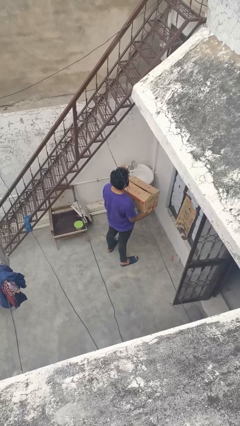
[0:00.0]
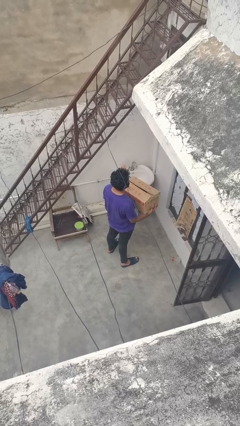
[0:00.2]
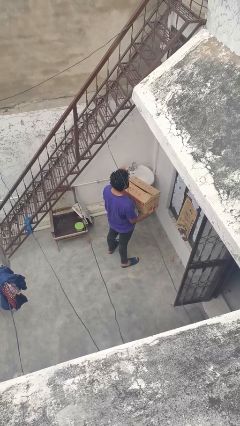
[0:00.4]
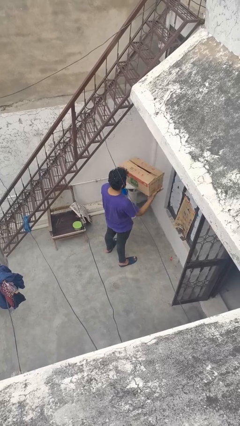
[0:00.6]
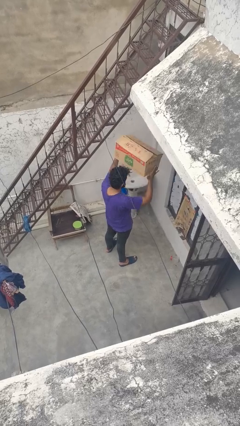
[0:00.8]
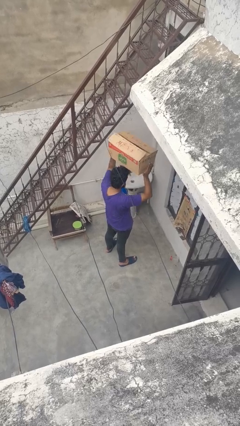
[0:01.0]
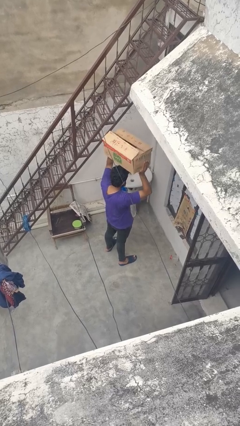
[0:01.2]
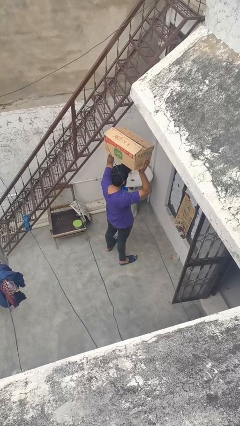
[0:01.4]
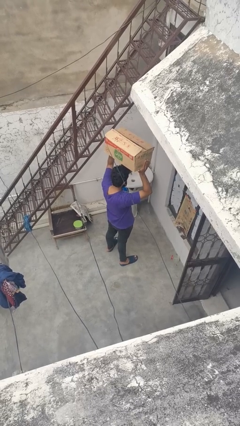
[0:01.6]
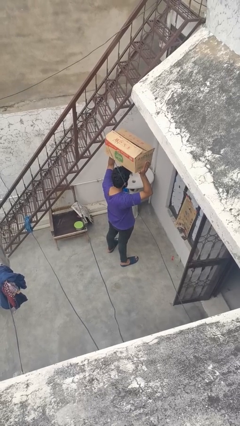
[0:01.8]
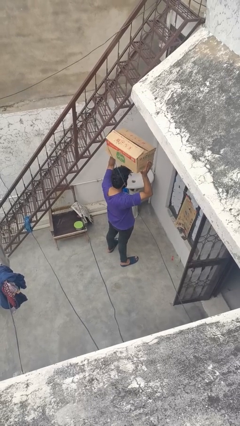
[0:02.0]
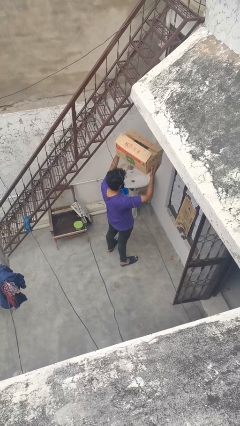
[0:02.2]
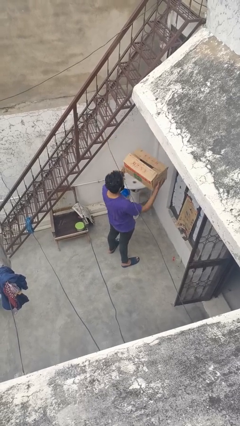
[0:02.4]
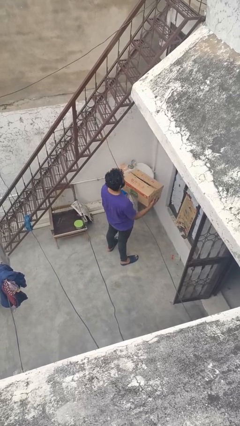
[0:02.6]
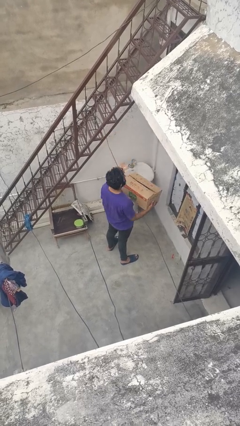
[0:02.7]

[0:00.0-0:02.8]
person holds object above head

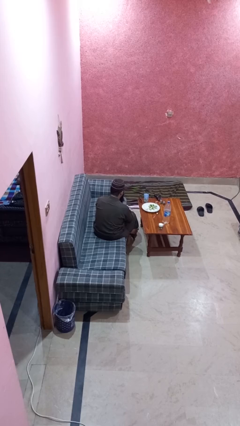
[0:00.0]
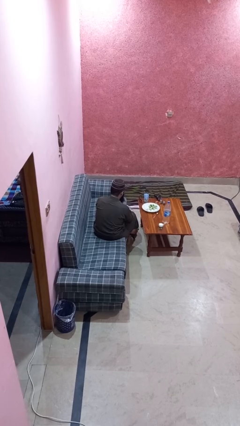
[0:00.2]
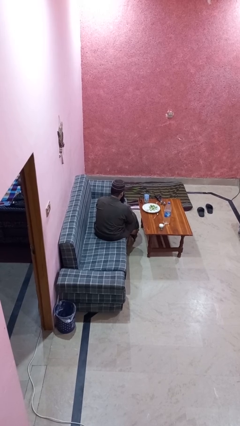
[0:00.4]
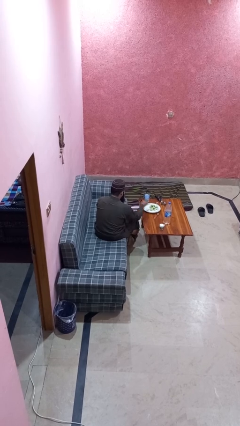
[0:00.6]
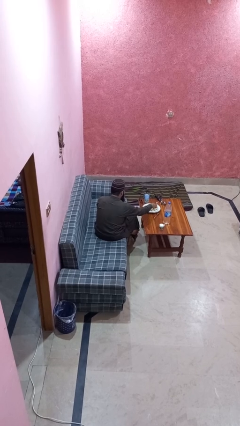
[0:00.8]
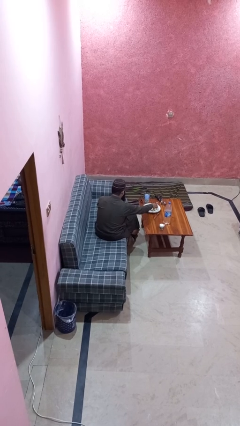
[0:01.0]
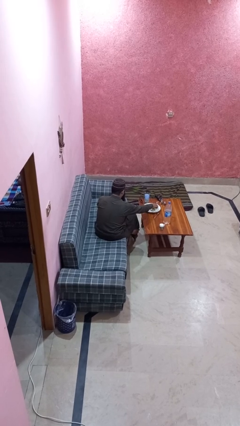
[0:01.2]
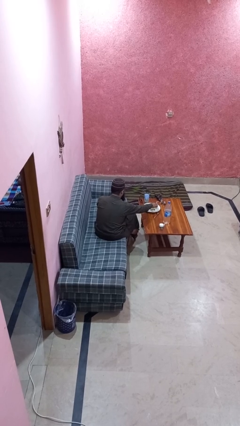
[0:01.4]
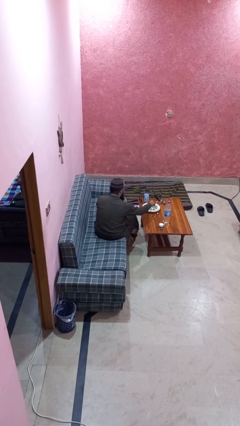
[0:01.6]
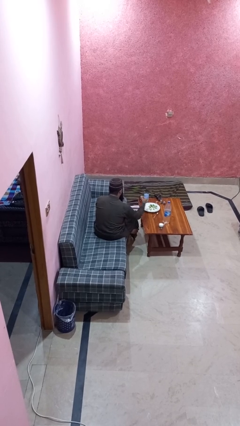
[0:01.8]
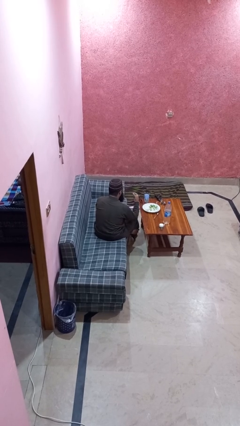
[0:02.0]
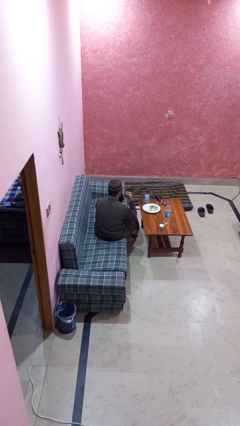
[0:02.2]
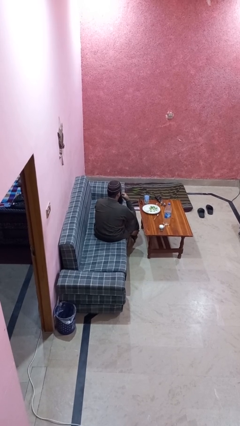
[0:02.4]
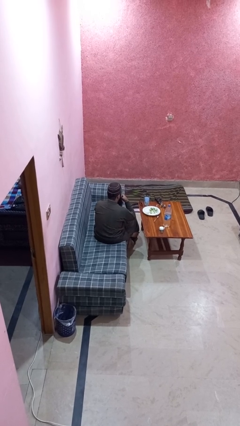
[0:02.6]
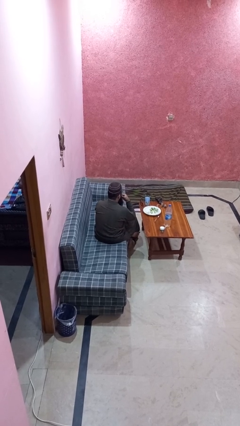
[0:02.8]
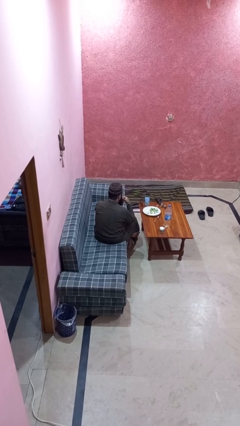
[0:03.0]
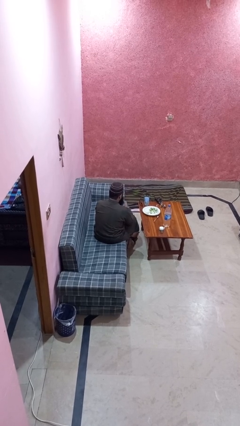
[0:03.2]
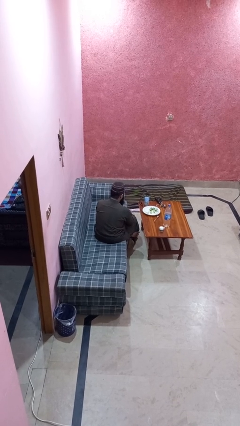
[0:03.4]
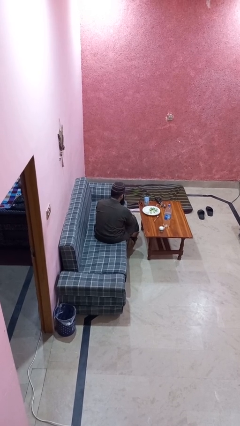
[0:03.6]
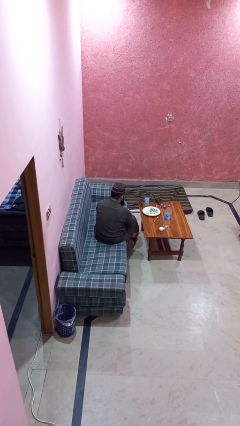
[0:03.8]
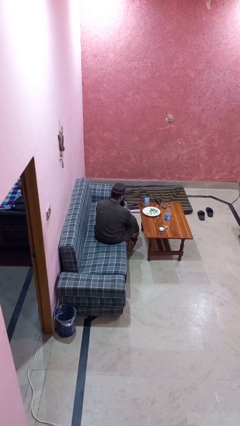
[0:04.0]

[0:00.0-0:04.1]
person eats with hands

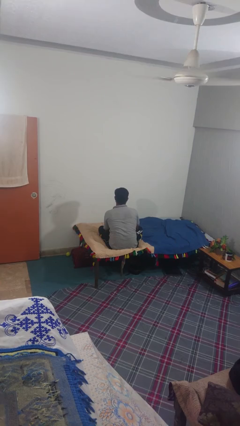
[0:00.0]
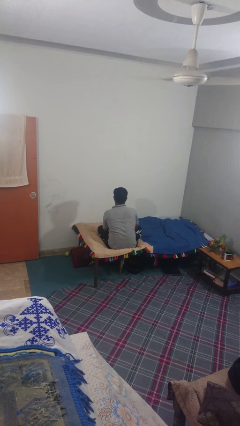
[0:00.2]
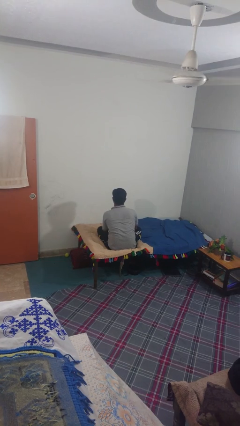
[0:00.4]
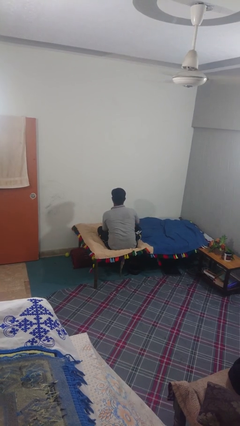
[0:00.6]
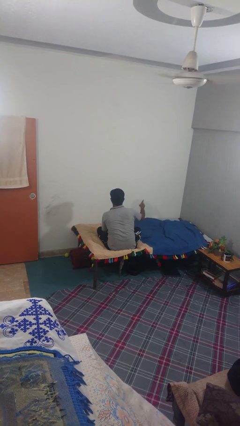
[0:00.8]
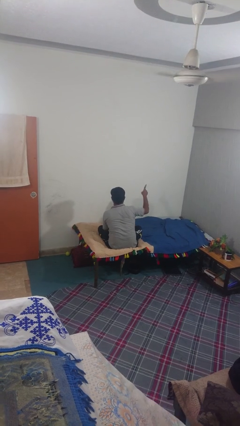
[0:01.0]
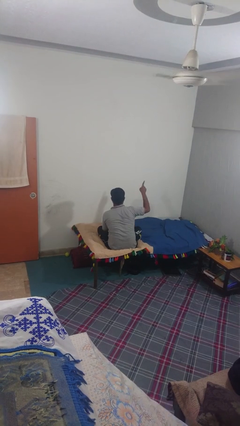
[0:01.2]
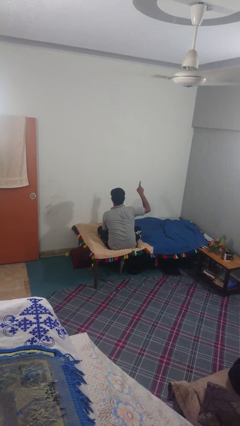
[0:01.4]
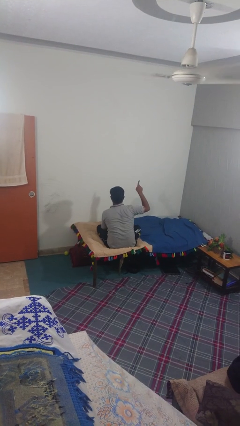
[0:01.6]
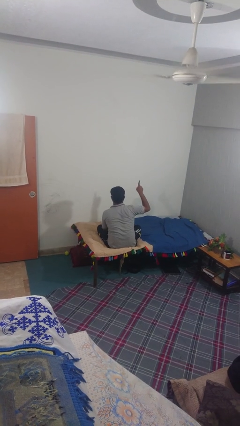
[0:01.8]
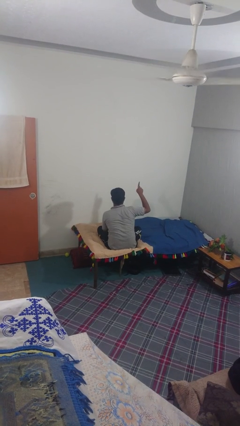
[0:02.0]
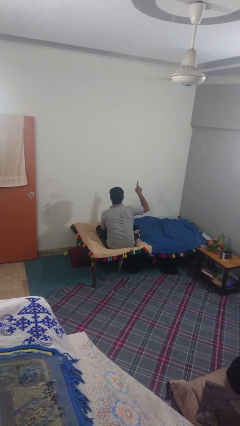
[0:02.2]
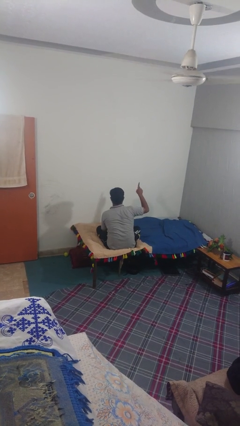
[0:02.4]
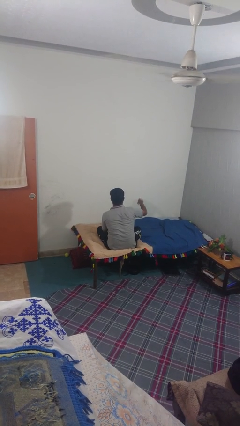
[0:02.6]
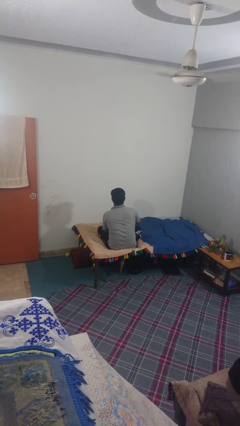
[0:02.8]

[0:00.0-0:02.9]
person gestures number one

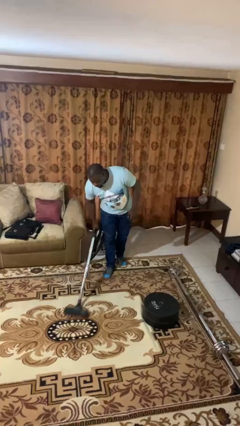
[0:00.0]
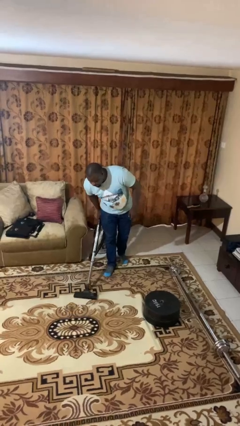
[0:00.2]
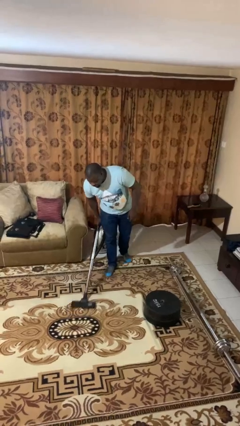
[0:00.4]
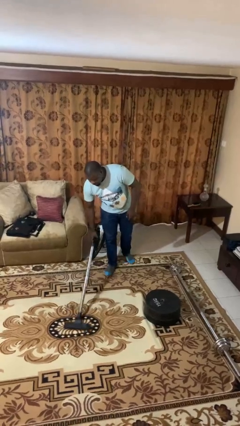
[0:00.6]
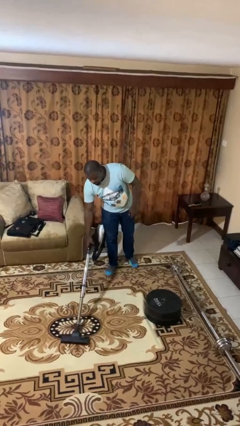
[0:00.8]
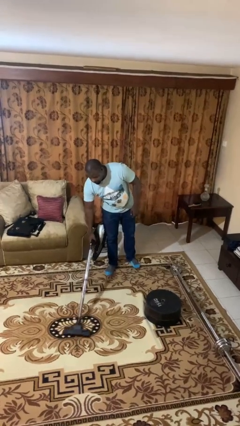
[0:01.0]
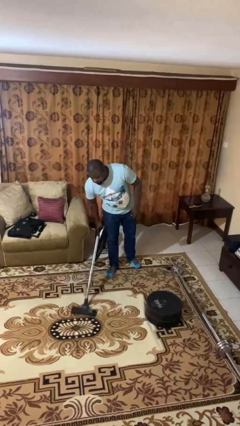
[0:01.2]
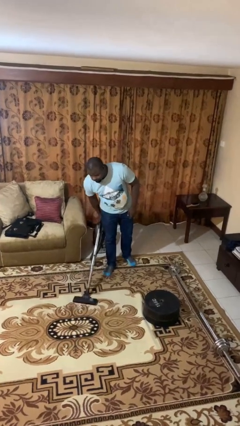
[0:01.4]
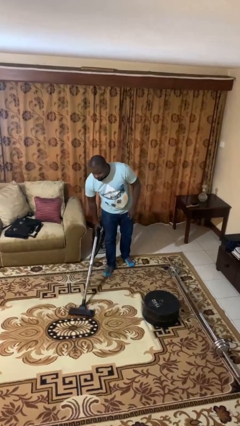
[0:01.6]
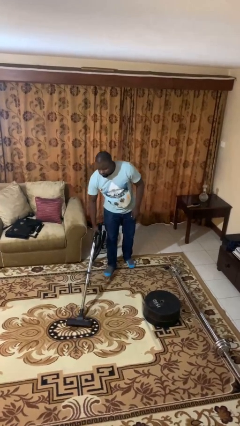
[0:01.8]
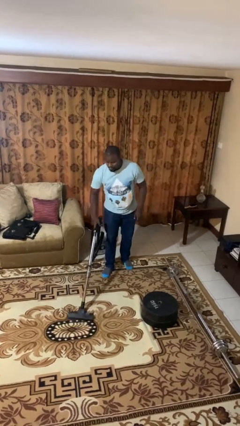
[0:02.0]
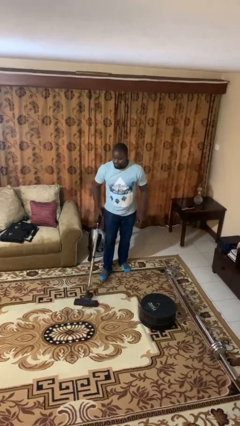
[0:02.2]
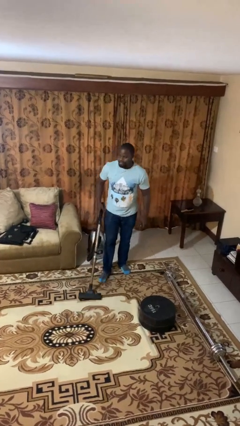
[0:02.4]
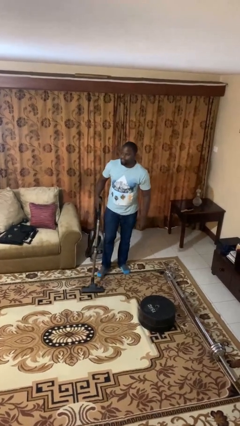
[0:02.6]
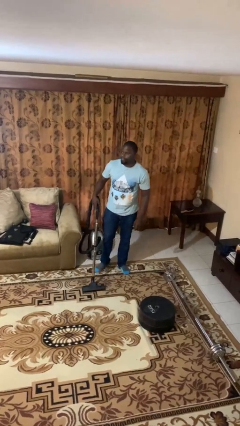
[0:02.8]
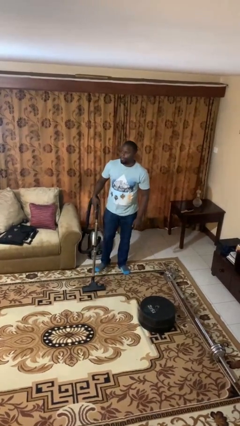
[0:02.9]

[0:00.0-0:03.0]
person vacuums carpet

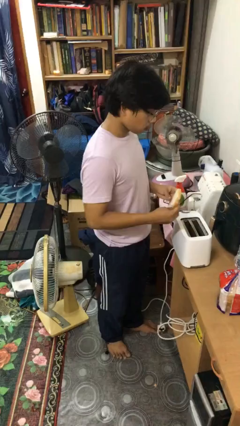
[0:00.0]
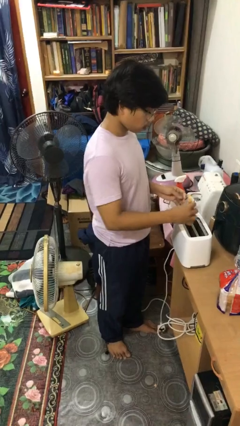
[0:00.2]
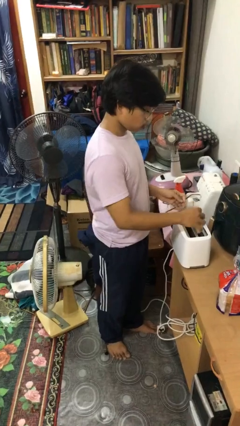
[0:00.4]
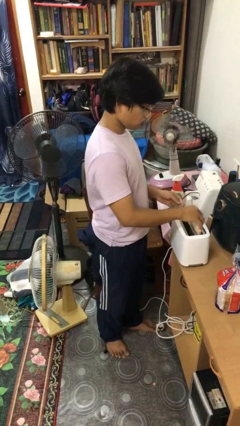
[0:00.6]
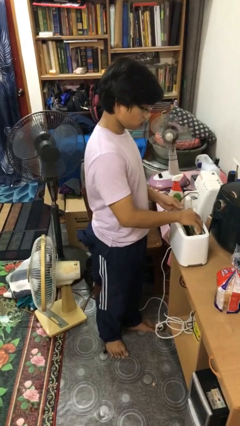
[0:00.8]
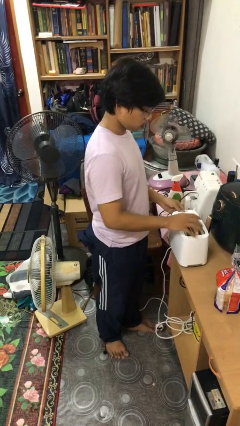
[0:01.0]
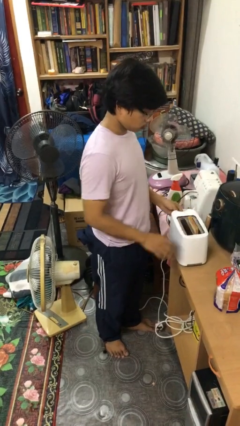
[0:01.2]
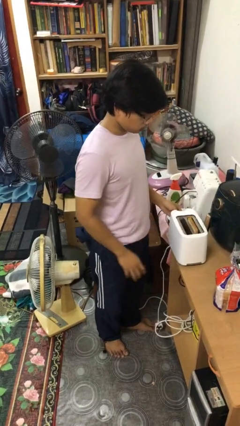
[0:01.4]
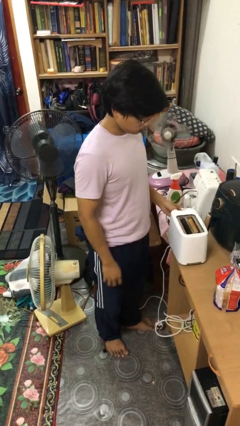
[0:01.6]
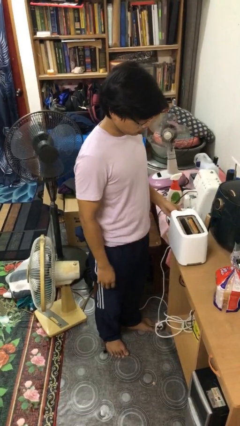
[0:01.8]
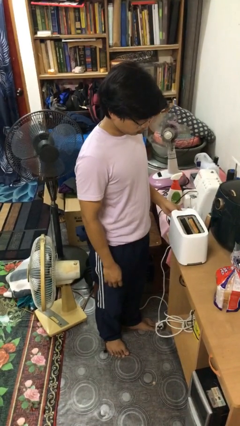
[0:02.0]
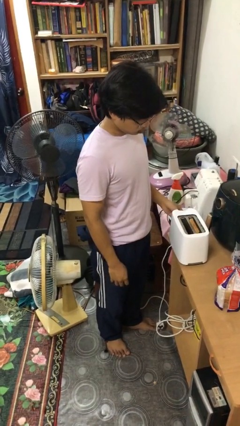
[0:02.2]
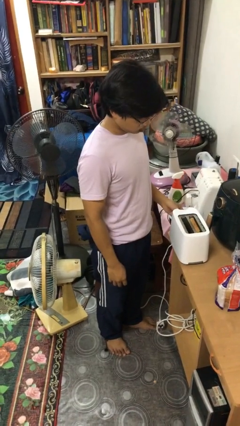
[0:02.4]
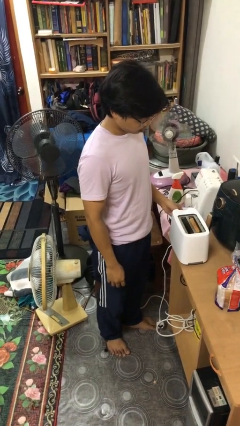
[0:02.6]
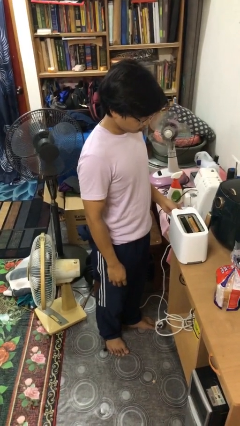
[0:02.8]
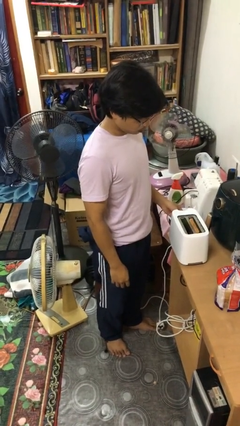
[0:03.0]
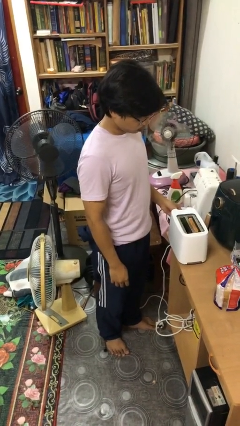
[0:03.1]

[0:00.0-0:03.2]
person puts object into toaster

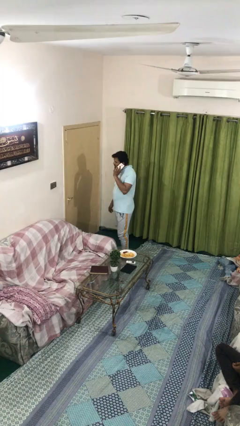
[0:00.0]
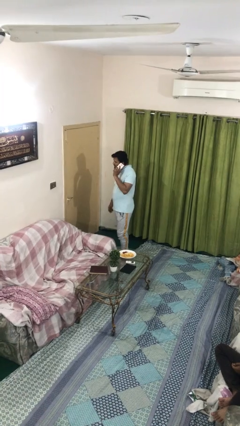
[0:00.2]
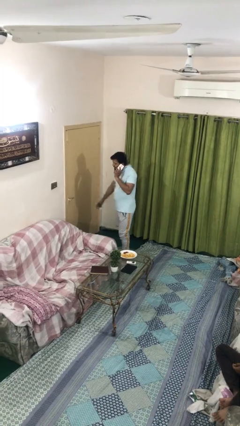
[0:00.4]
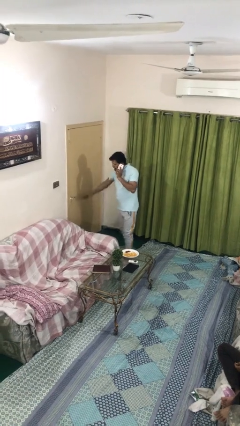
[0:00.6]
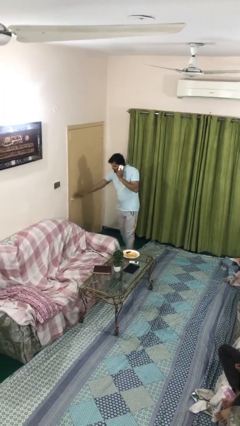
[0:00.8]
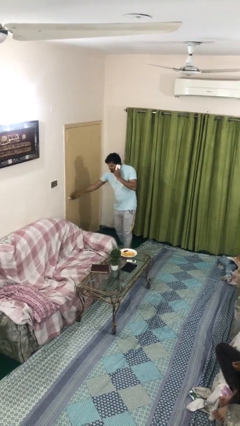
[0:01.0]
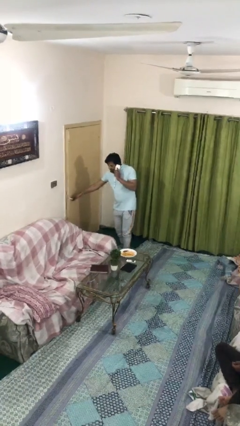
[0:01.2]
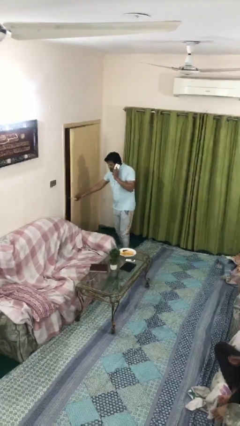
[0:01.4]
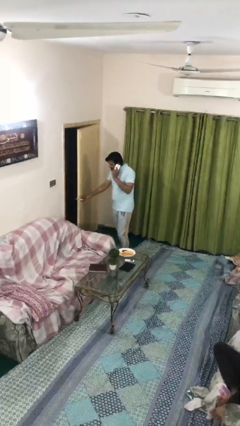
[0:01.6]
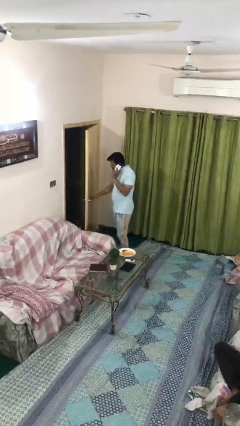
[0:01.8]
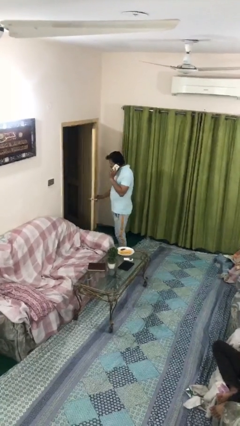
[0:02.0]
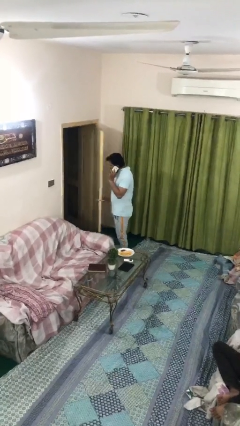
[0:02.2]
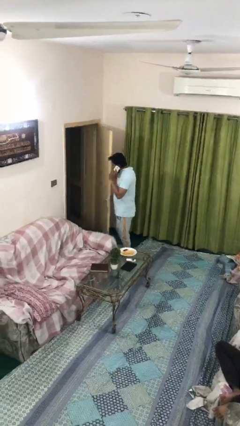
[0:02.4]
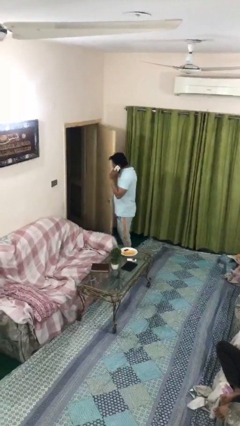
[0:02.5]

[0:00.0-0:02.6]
person opens facility door
